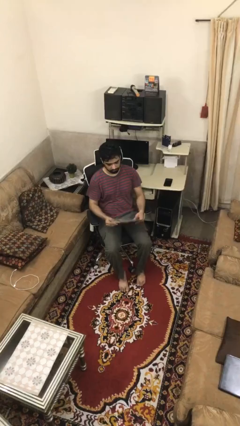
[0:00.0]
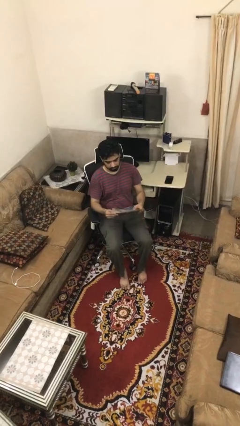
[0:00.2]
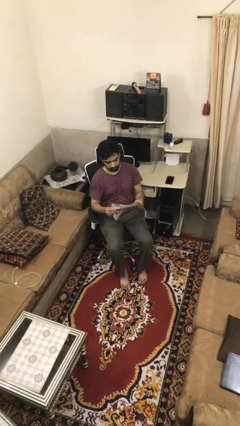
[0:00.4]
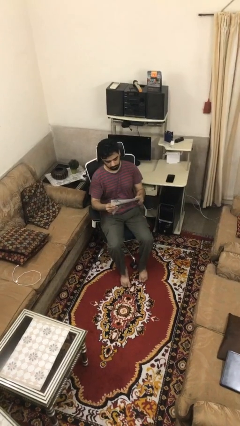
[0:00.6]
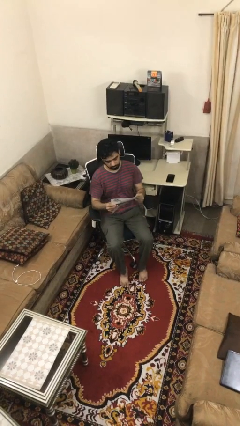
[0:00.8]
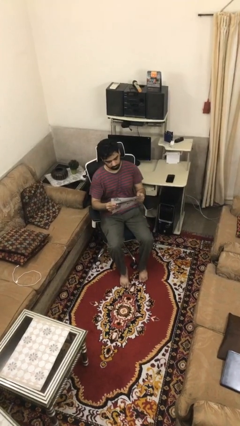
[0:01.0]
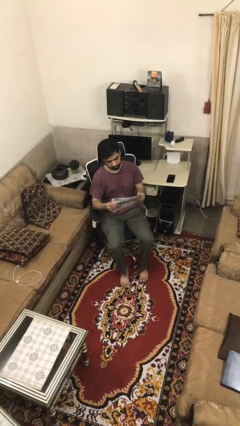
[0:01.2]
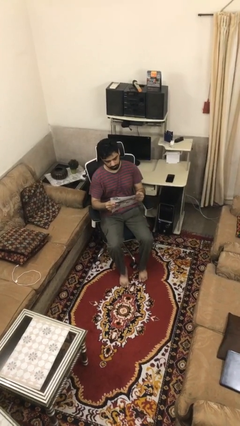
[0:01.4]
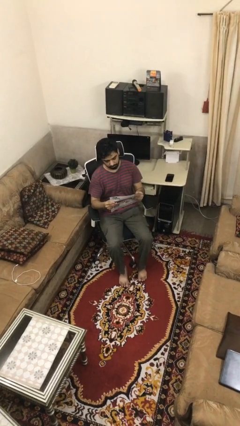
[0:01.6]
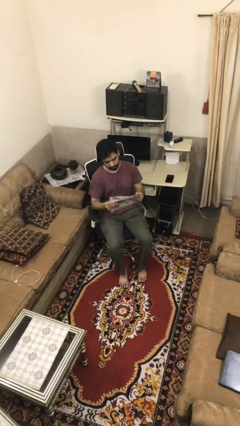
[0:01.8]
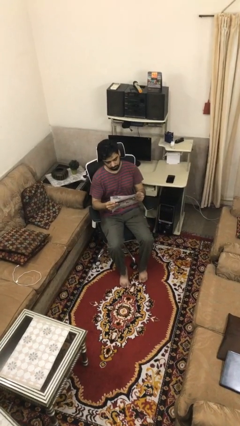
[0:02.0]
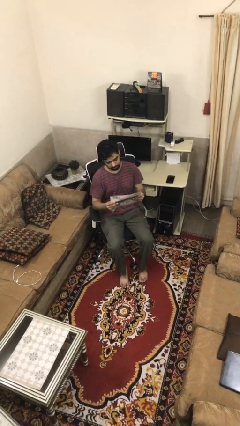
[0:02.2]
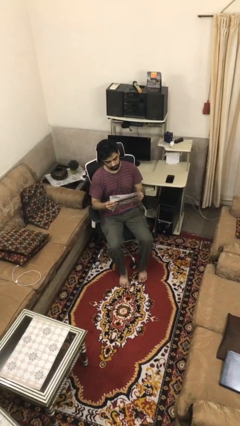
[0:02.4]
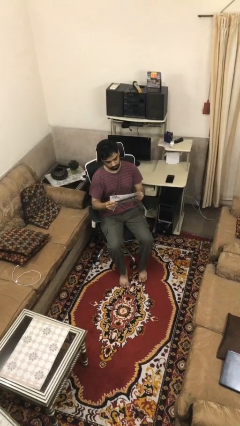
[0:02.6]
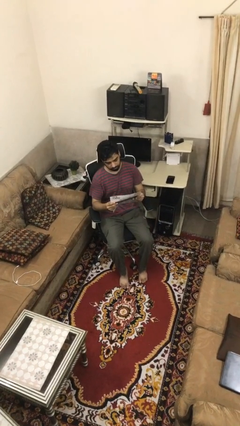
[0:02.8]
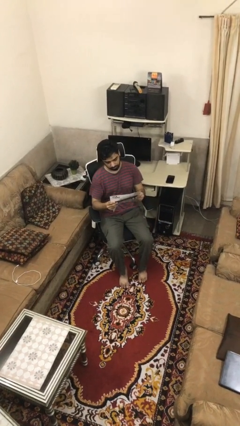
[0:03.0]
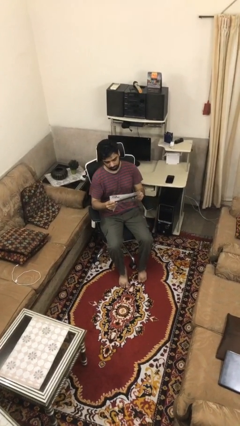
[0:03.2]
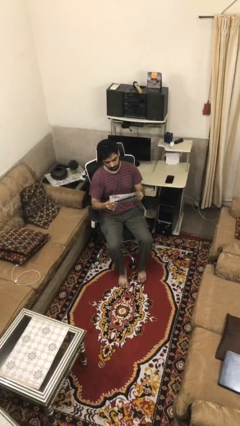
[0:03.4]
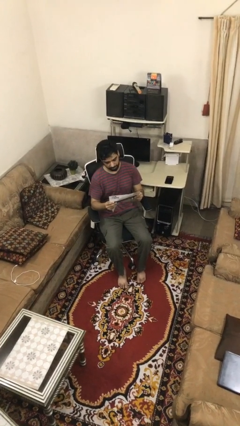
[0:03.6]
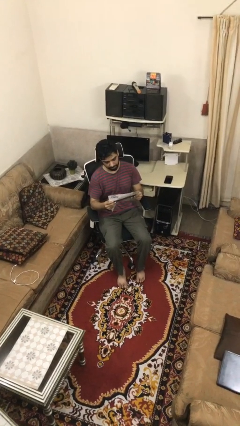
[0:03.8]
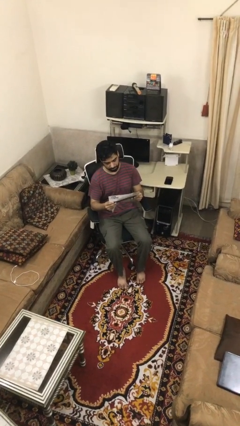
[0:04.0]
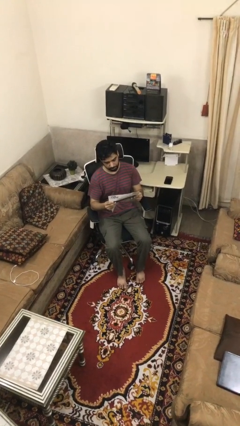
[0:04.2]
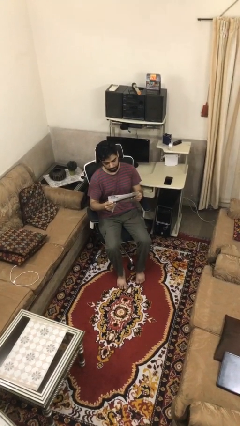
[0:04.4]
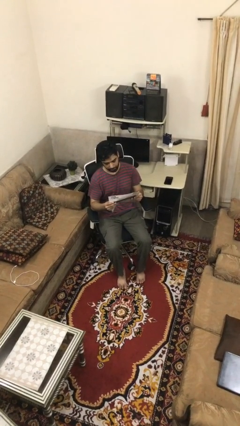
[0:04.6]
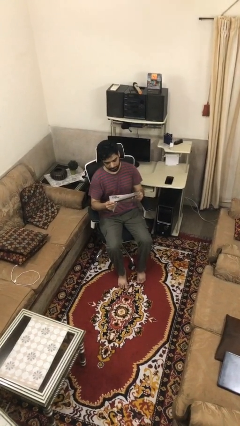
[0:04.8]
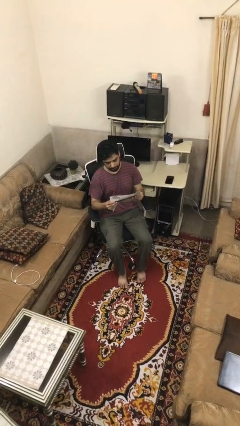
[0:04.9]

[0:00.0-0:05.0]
person reads document

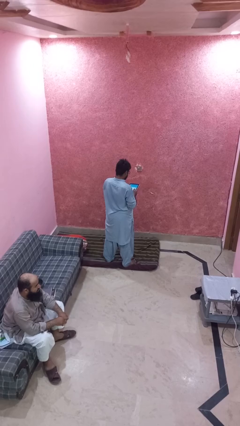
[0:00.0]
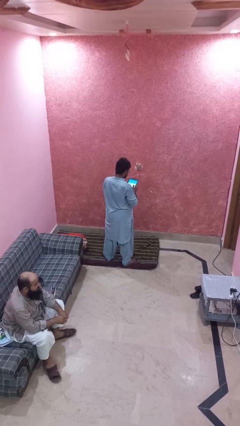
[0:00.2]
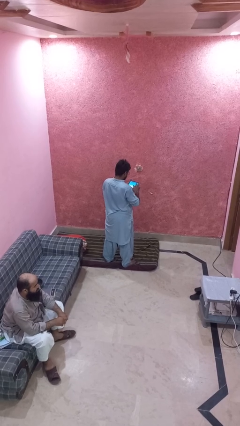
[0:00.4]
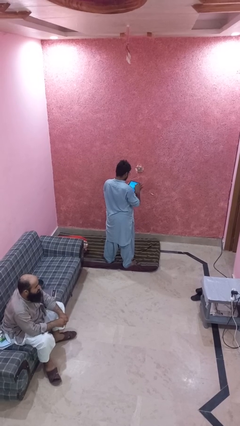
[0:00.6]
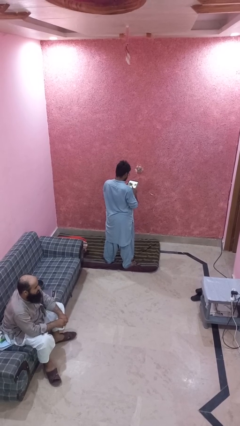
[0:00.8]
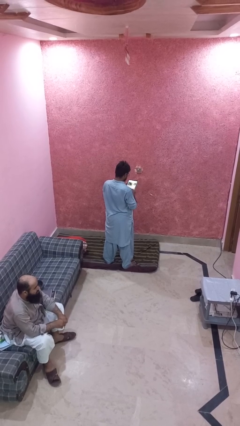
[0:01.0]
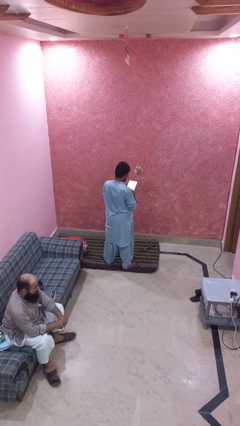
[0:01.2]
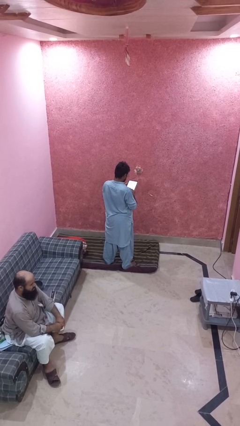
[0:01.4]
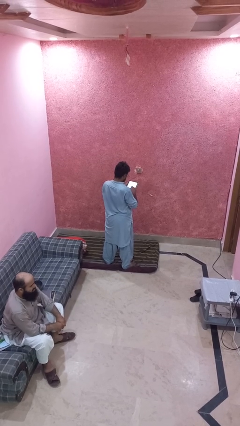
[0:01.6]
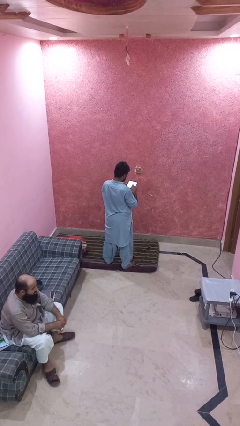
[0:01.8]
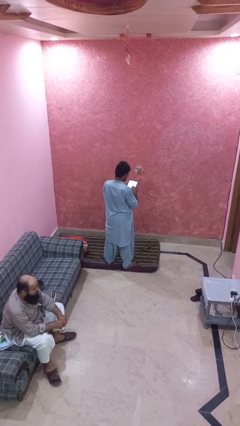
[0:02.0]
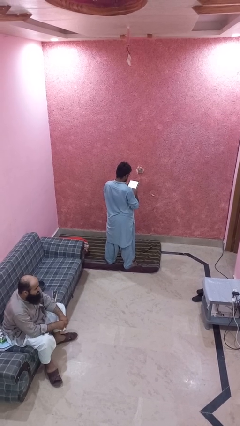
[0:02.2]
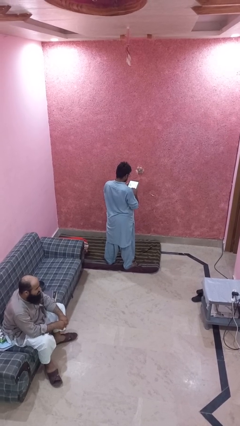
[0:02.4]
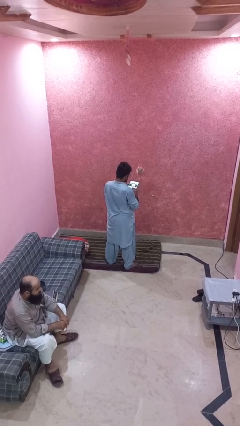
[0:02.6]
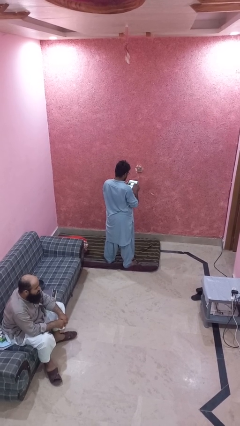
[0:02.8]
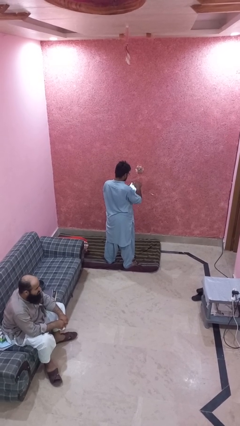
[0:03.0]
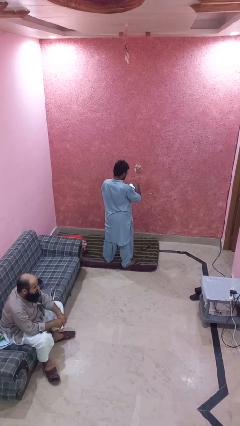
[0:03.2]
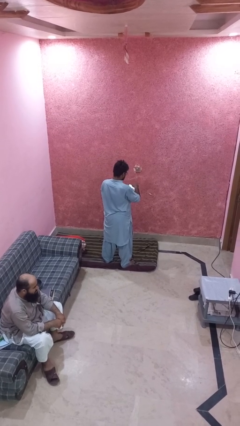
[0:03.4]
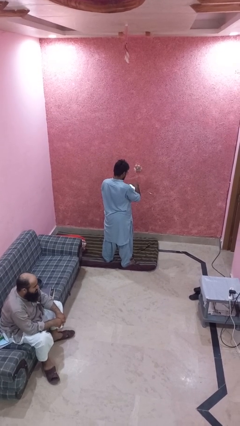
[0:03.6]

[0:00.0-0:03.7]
person interacts with tablet

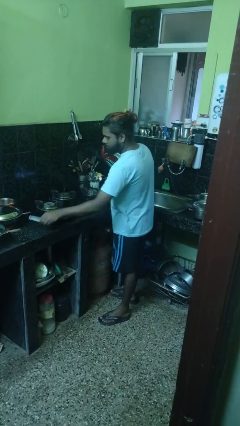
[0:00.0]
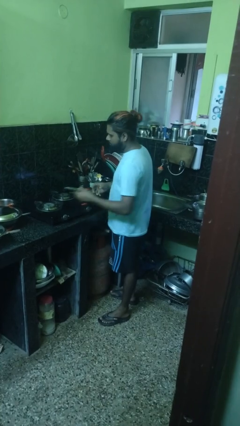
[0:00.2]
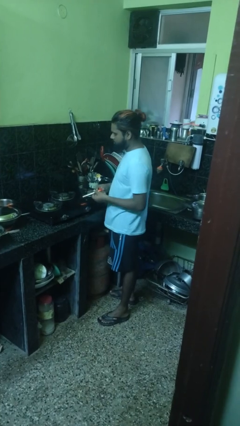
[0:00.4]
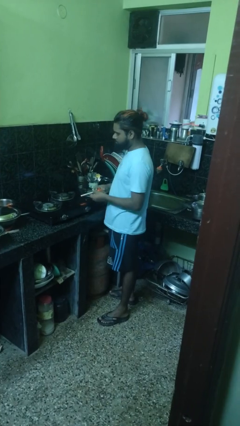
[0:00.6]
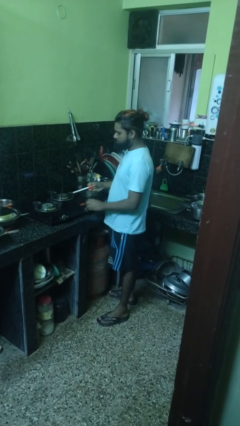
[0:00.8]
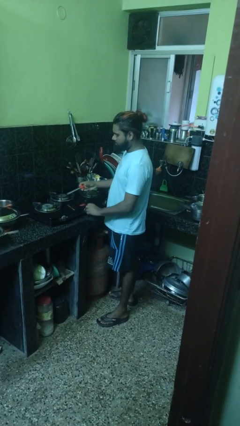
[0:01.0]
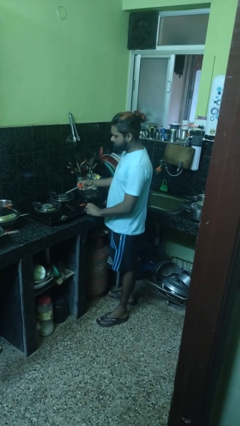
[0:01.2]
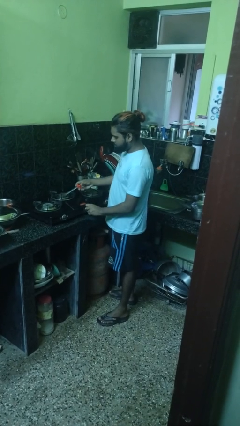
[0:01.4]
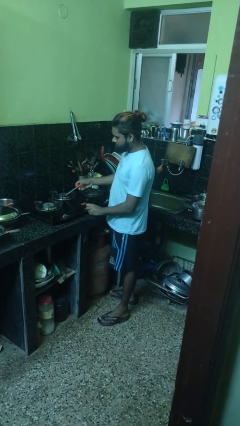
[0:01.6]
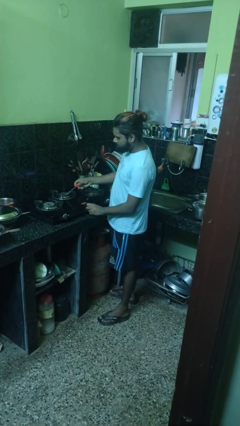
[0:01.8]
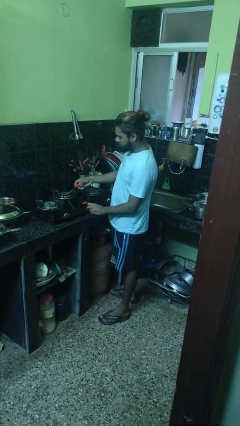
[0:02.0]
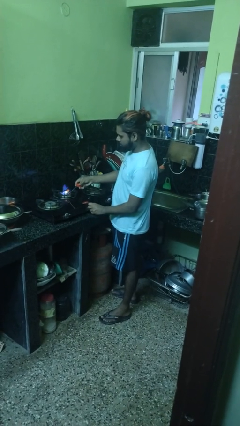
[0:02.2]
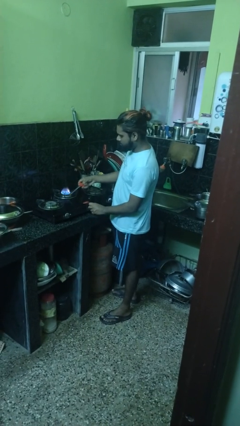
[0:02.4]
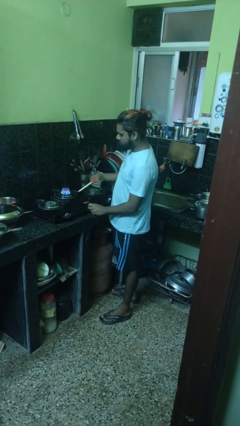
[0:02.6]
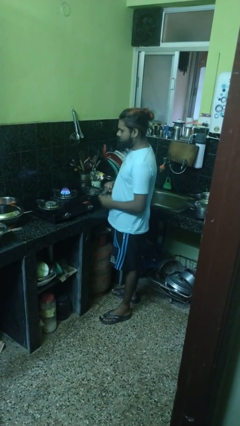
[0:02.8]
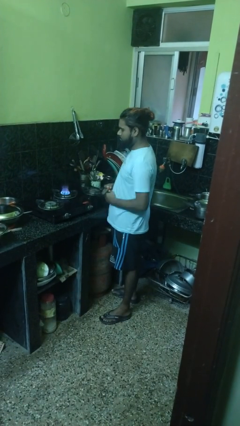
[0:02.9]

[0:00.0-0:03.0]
person turns on stovetop

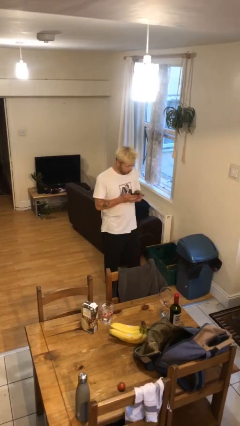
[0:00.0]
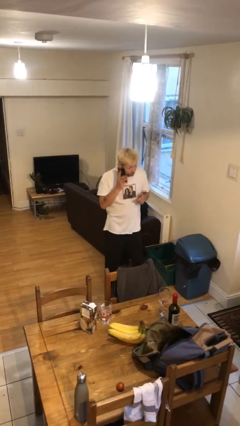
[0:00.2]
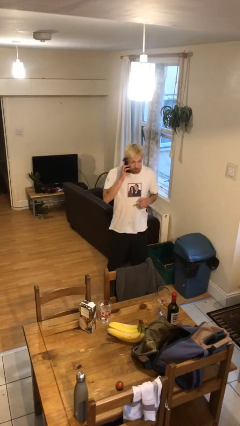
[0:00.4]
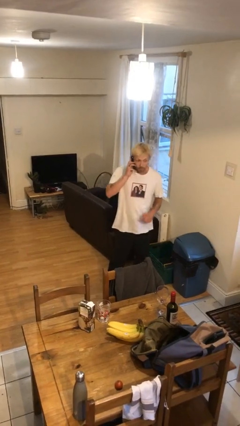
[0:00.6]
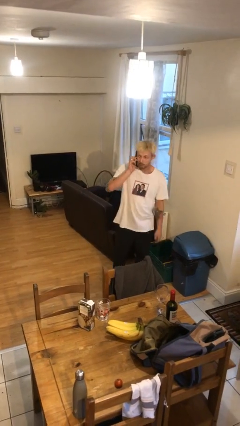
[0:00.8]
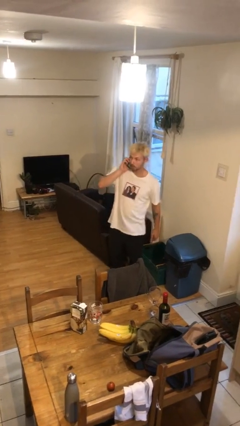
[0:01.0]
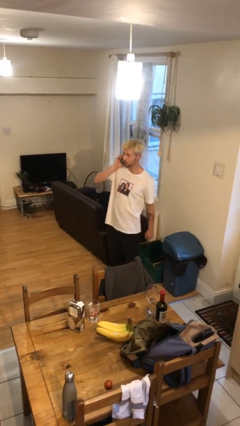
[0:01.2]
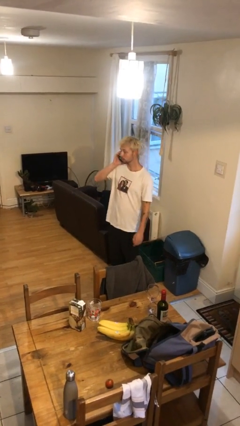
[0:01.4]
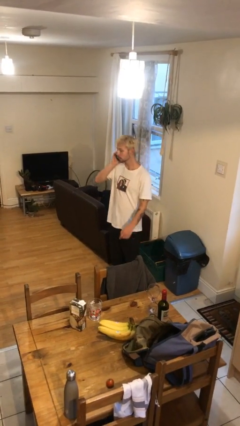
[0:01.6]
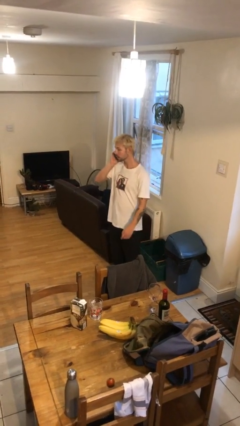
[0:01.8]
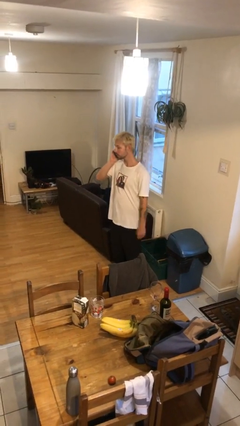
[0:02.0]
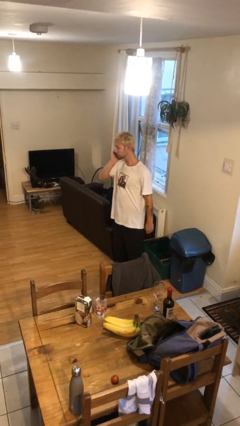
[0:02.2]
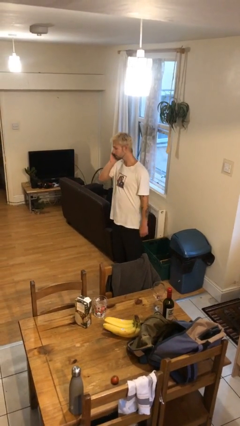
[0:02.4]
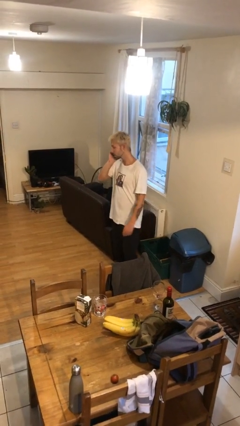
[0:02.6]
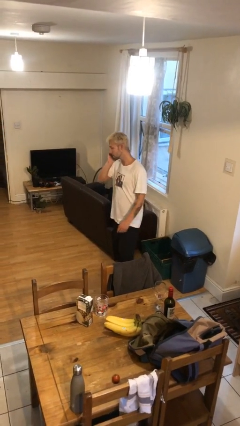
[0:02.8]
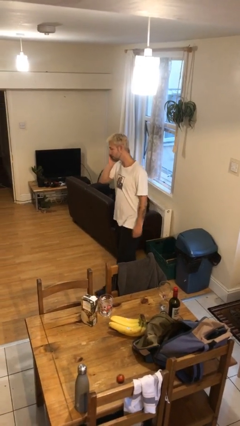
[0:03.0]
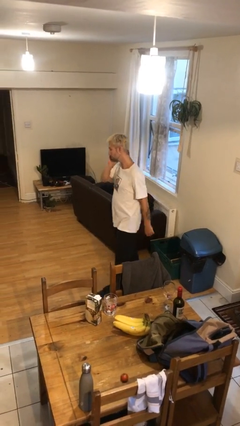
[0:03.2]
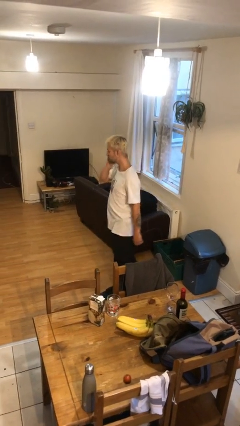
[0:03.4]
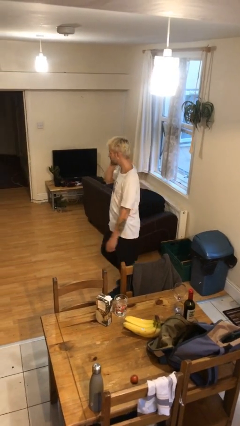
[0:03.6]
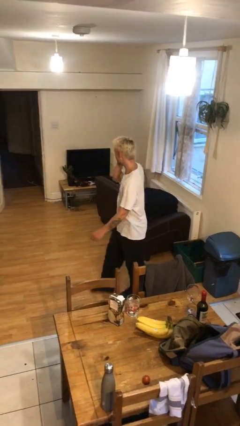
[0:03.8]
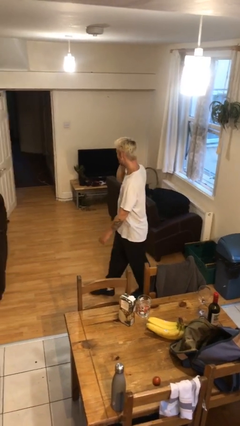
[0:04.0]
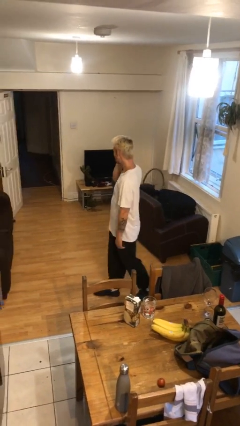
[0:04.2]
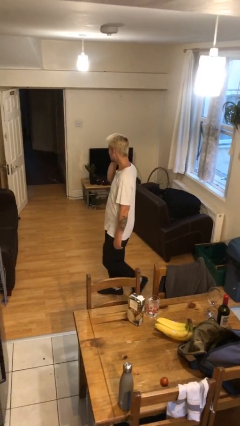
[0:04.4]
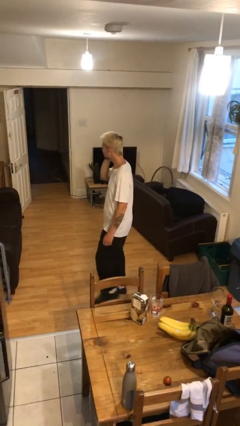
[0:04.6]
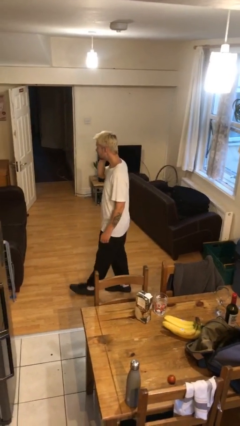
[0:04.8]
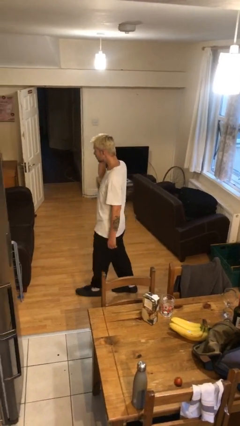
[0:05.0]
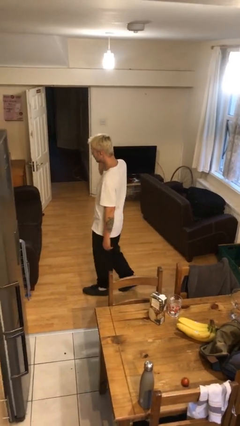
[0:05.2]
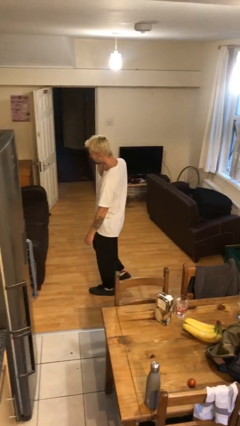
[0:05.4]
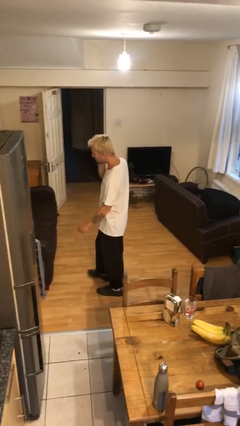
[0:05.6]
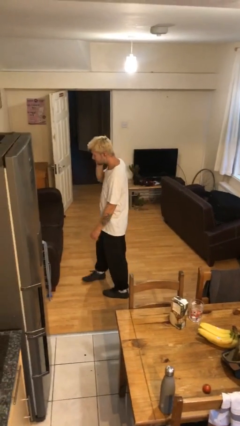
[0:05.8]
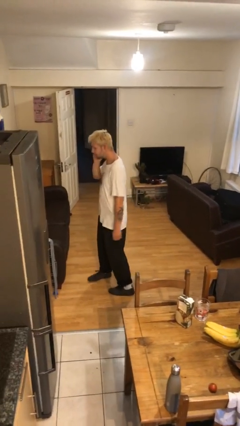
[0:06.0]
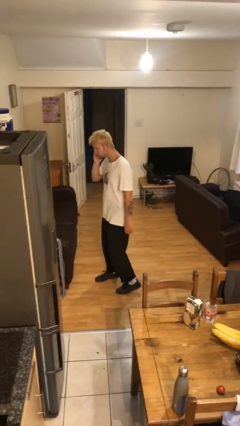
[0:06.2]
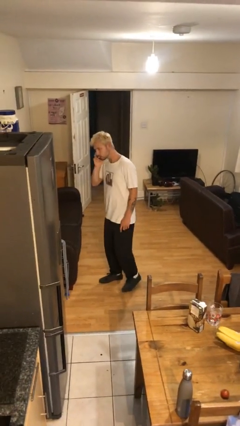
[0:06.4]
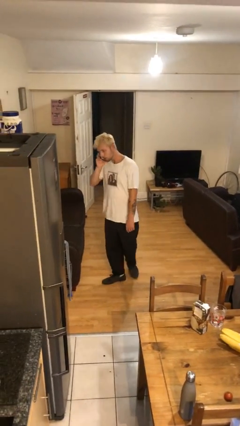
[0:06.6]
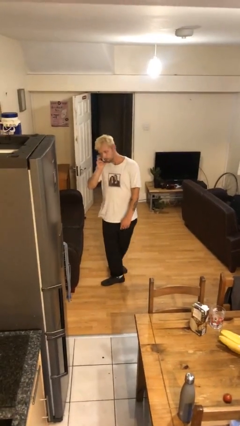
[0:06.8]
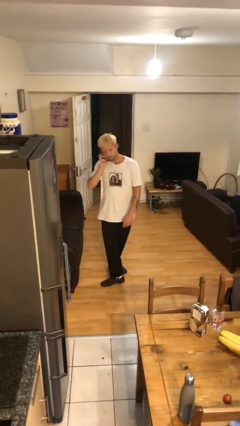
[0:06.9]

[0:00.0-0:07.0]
person talks on phone
